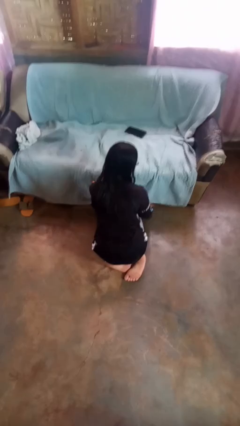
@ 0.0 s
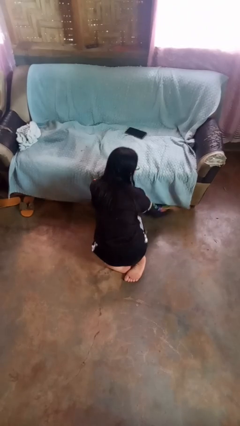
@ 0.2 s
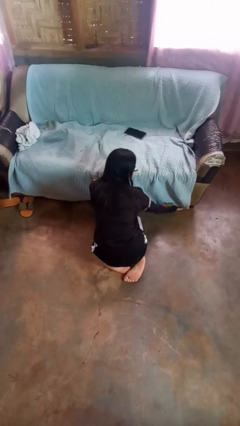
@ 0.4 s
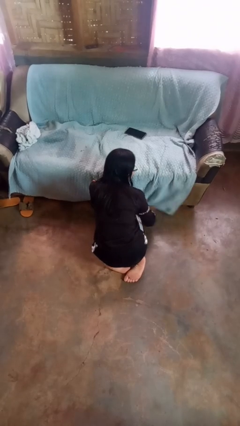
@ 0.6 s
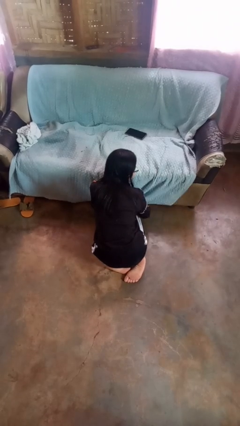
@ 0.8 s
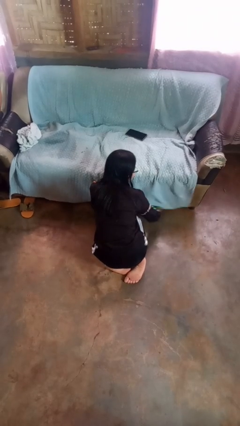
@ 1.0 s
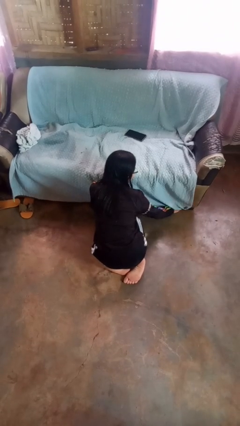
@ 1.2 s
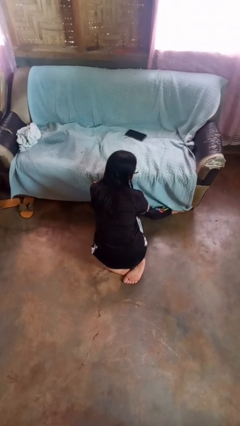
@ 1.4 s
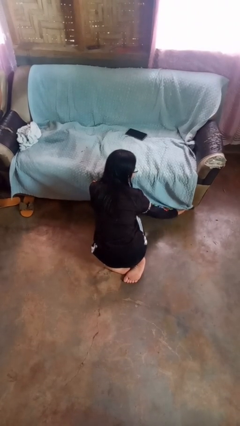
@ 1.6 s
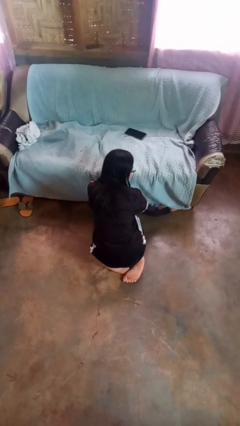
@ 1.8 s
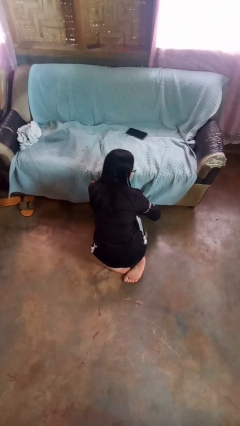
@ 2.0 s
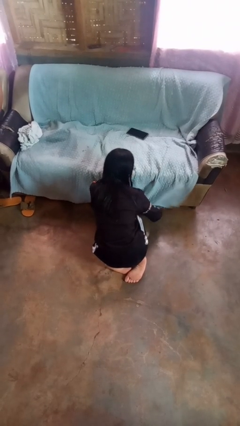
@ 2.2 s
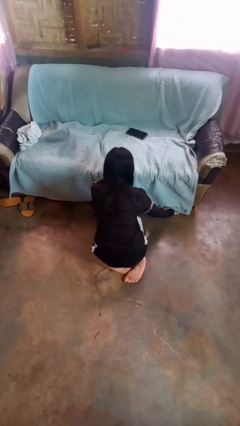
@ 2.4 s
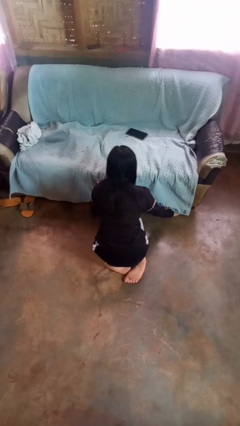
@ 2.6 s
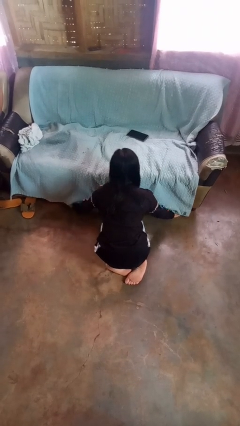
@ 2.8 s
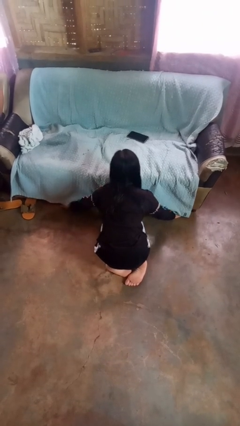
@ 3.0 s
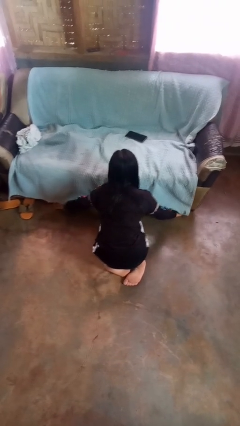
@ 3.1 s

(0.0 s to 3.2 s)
person searches under couch

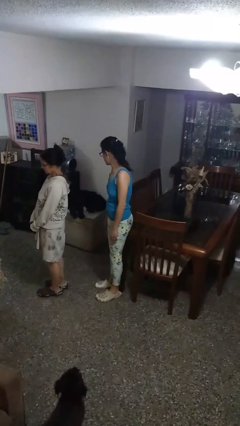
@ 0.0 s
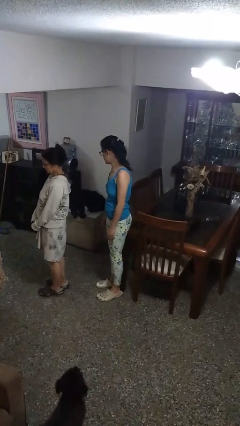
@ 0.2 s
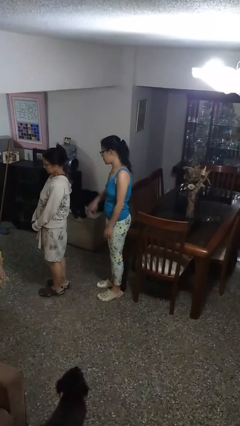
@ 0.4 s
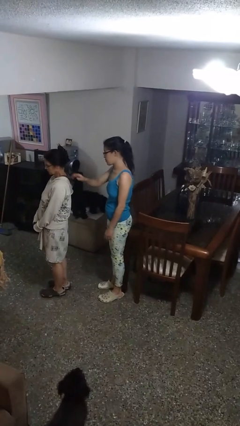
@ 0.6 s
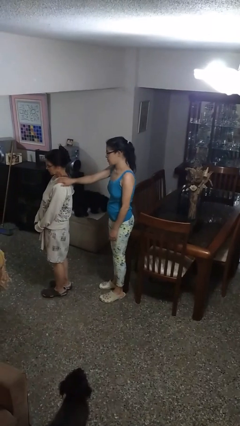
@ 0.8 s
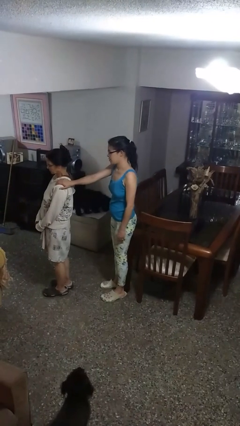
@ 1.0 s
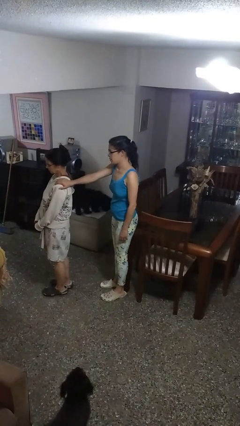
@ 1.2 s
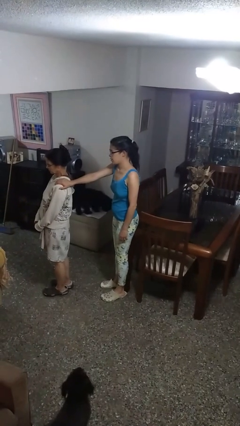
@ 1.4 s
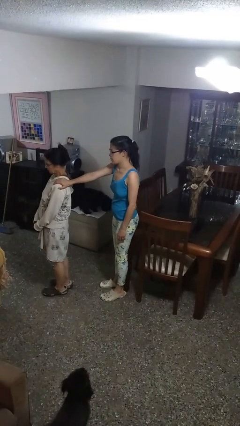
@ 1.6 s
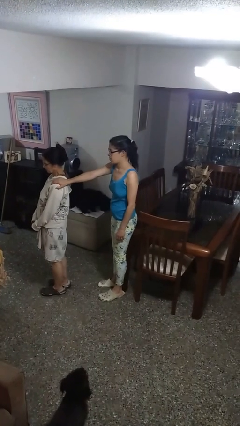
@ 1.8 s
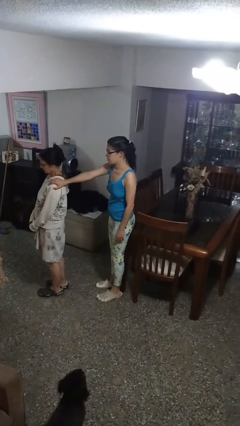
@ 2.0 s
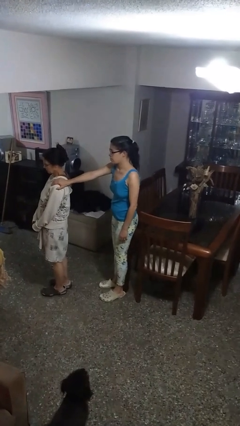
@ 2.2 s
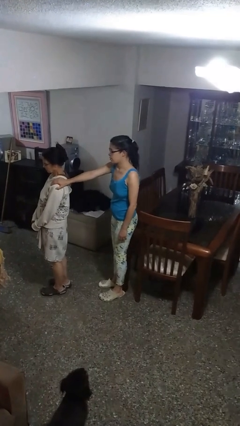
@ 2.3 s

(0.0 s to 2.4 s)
person grabs person by shoulder

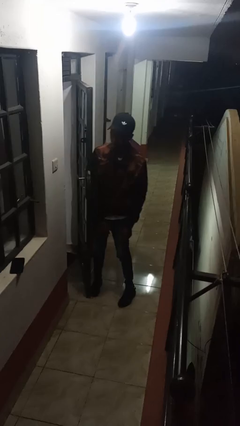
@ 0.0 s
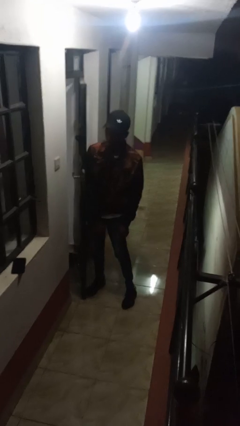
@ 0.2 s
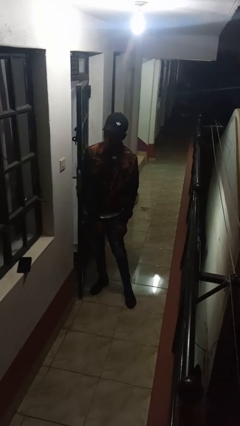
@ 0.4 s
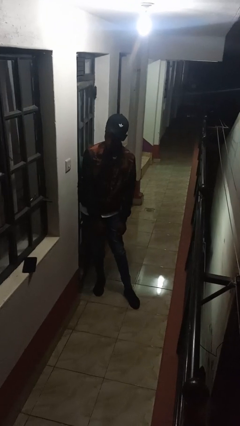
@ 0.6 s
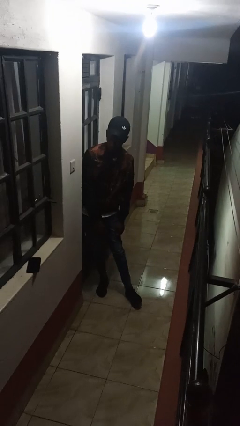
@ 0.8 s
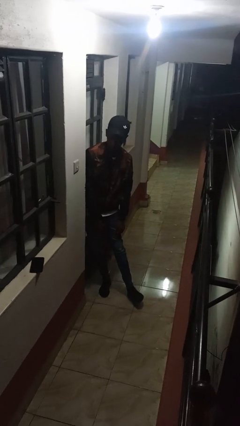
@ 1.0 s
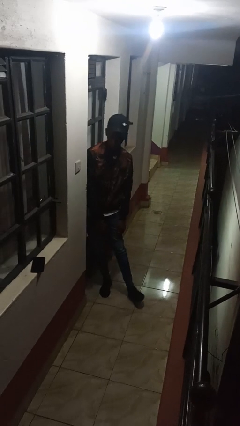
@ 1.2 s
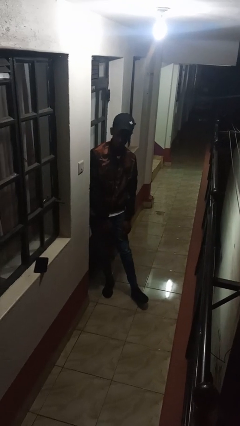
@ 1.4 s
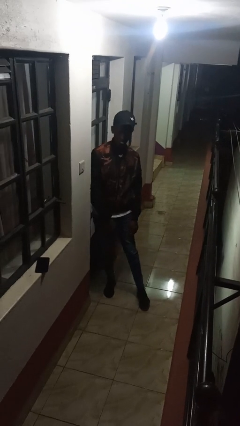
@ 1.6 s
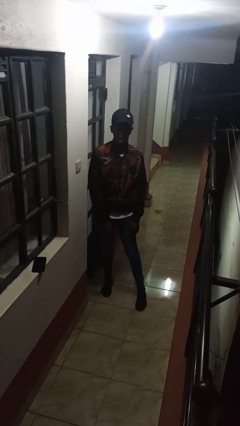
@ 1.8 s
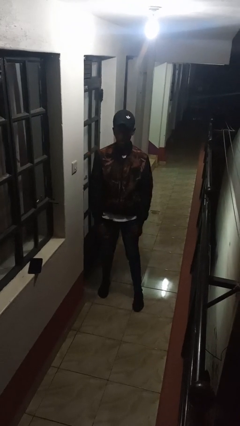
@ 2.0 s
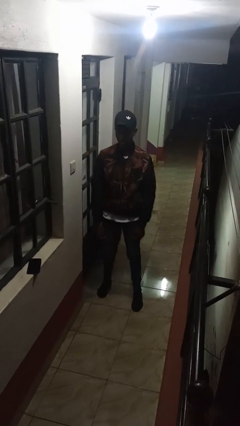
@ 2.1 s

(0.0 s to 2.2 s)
person closes door with hip

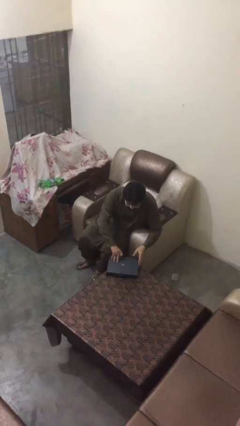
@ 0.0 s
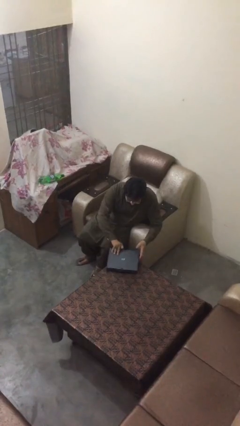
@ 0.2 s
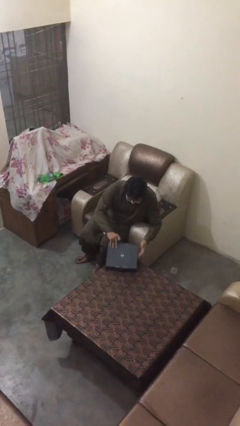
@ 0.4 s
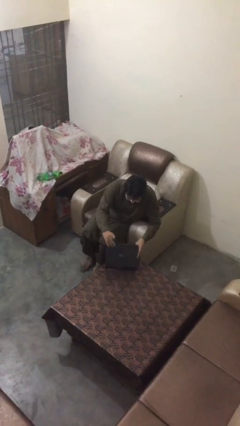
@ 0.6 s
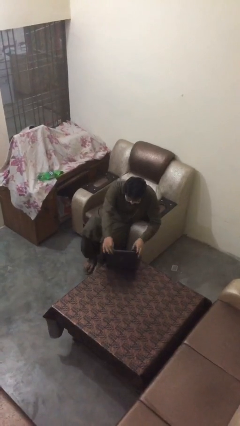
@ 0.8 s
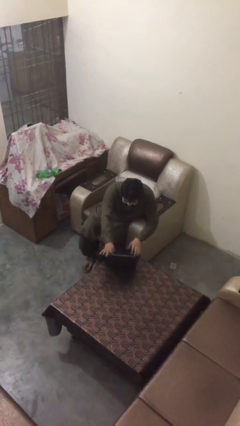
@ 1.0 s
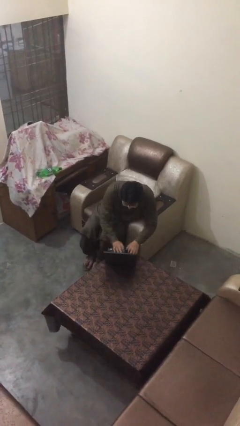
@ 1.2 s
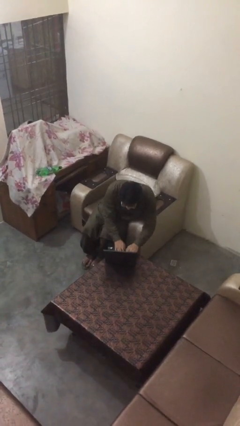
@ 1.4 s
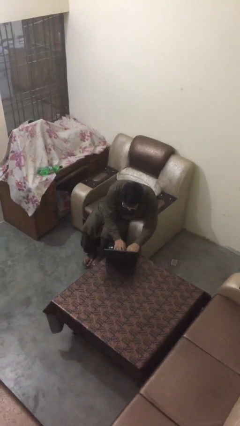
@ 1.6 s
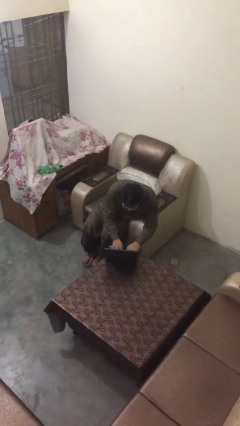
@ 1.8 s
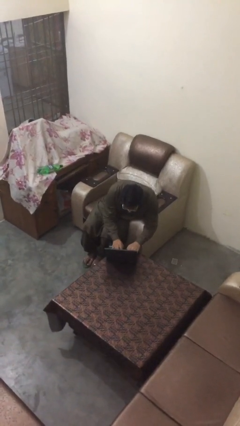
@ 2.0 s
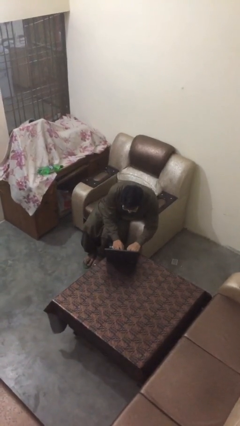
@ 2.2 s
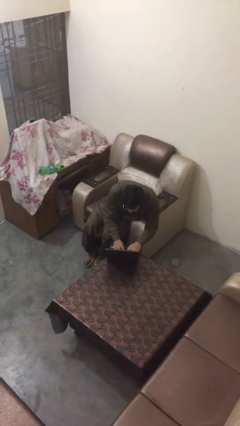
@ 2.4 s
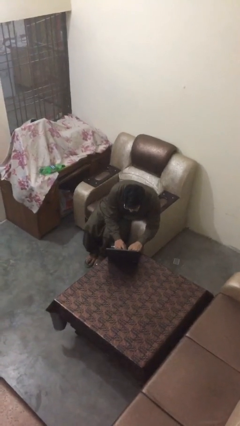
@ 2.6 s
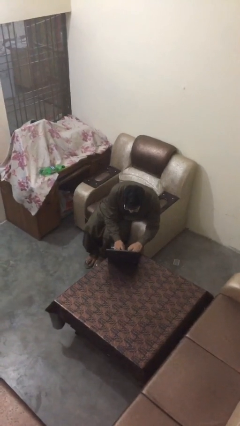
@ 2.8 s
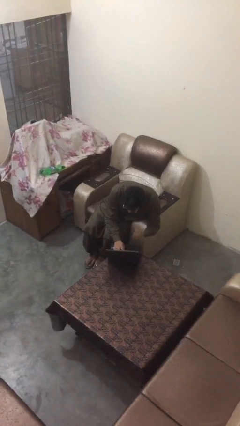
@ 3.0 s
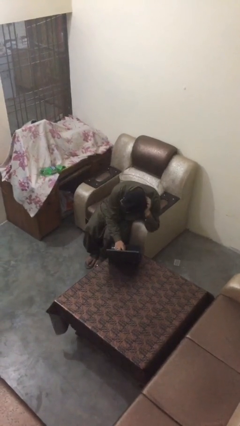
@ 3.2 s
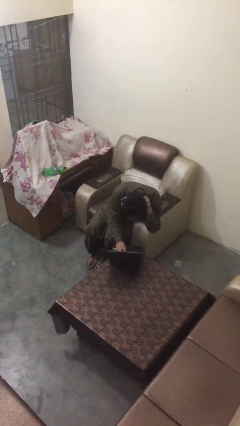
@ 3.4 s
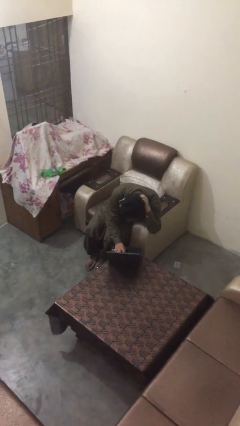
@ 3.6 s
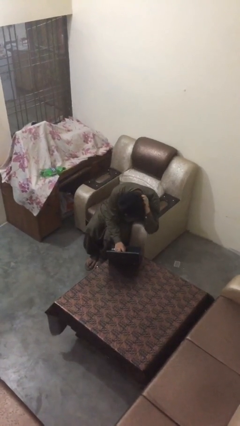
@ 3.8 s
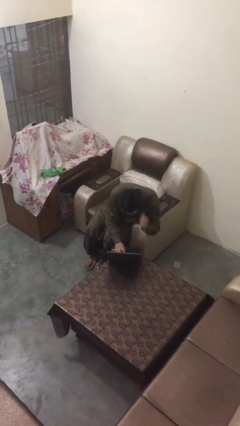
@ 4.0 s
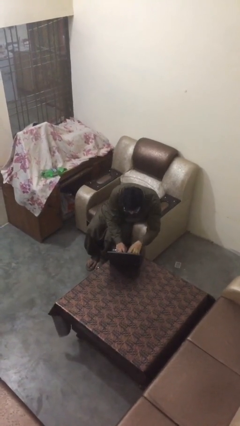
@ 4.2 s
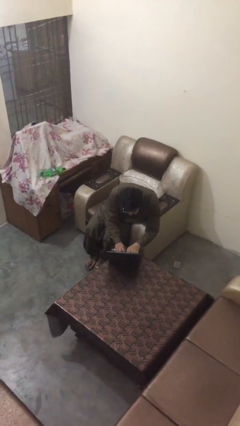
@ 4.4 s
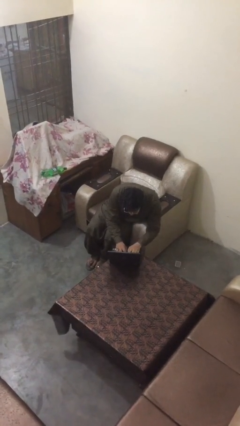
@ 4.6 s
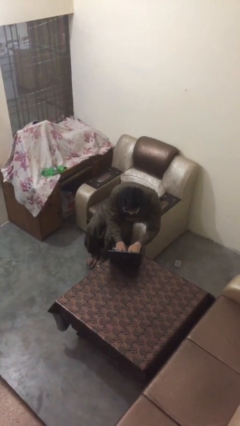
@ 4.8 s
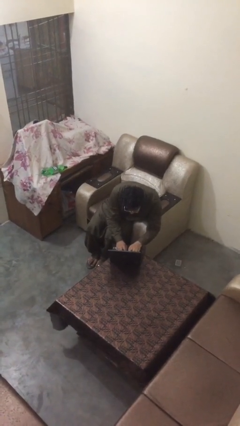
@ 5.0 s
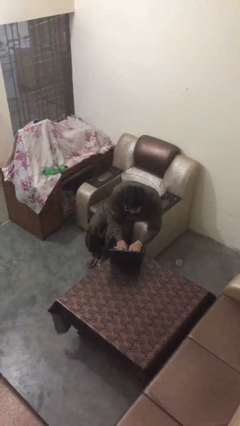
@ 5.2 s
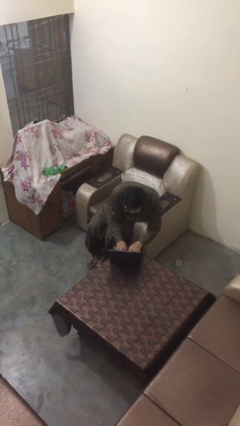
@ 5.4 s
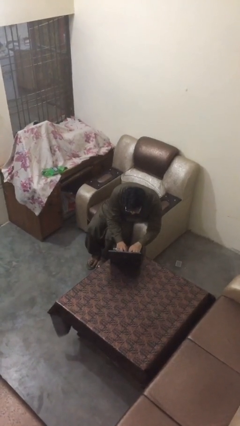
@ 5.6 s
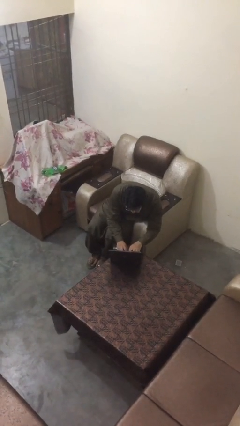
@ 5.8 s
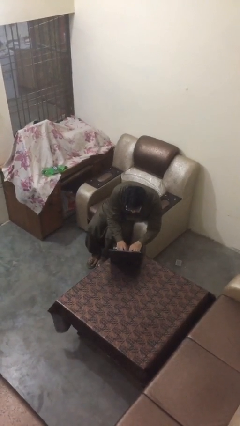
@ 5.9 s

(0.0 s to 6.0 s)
person interacts with laptop

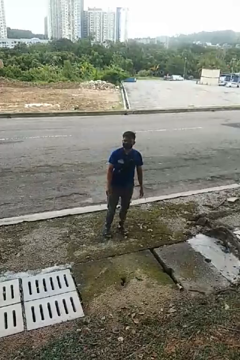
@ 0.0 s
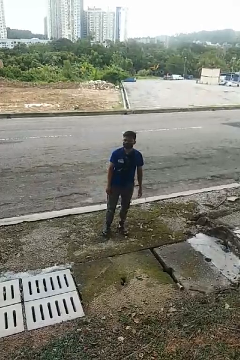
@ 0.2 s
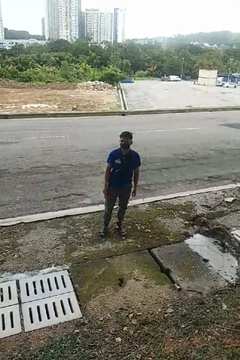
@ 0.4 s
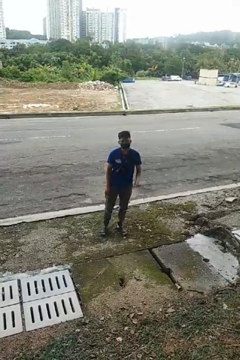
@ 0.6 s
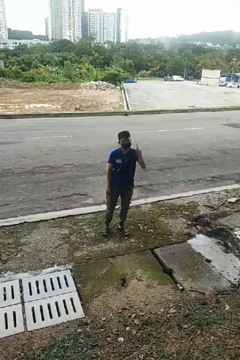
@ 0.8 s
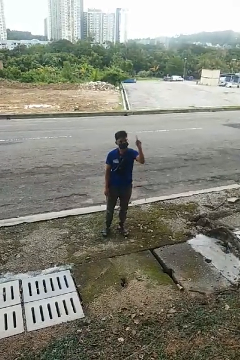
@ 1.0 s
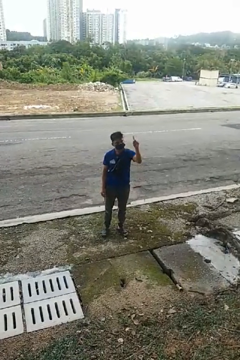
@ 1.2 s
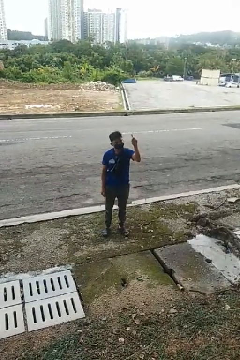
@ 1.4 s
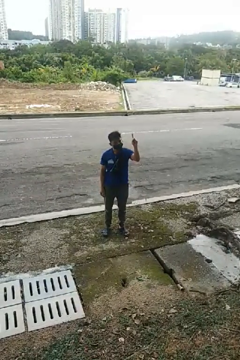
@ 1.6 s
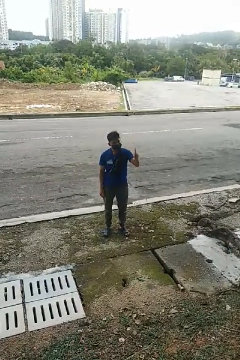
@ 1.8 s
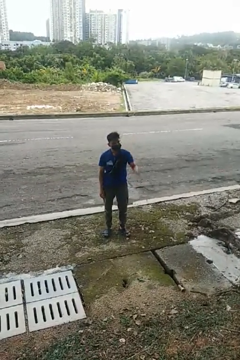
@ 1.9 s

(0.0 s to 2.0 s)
person gestures number one

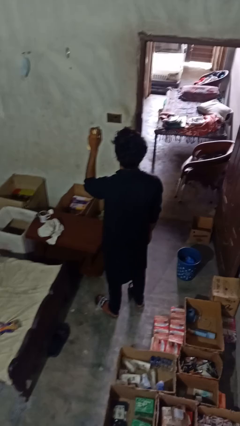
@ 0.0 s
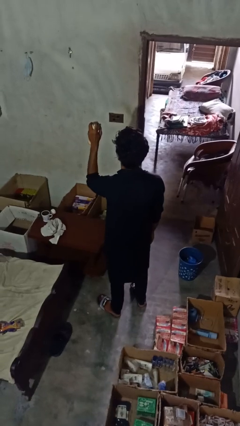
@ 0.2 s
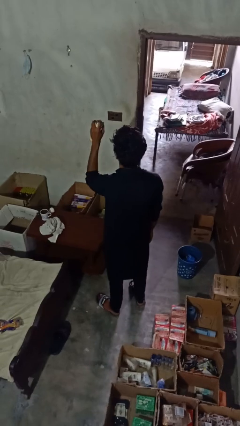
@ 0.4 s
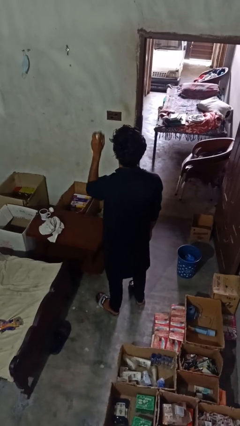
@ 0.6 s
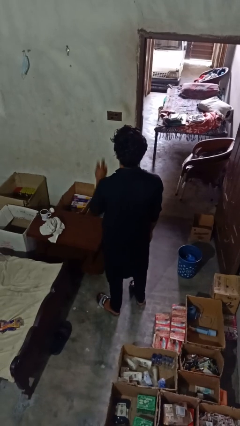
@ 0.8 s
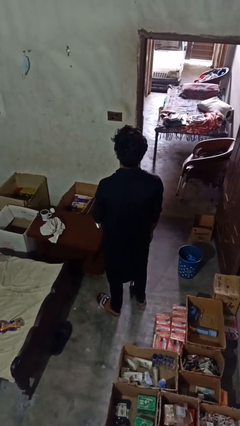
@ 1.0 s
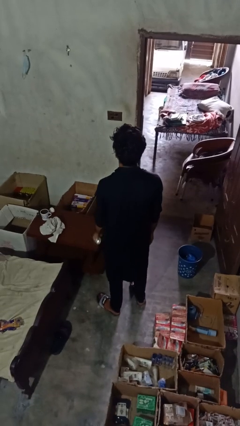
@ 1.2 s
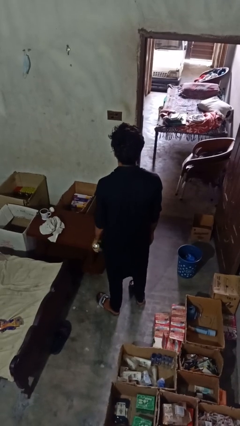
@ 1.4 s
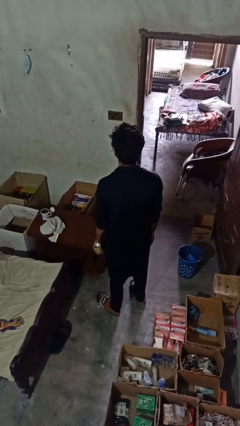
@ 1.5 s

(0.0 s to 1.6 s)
person sprays from bottle

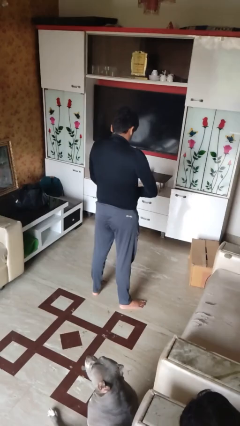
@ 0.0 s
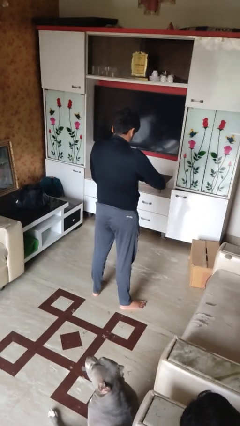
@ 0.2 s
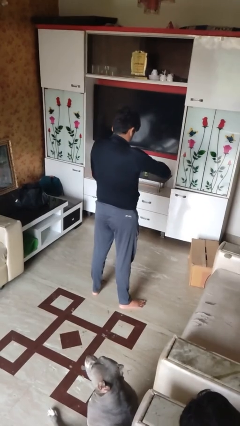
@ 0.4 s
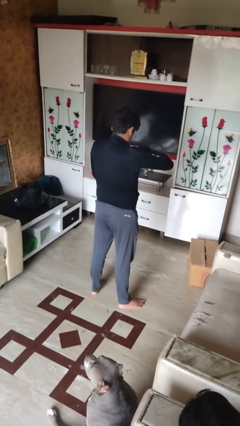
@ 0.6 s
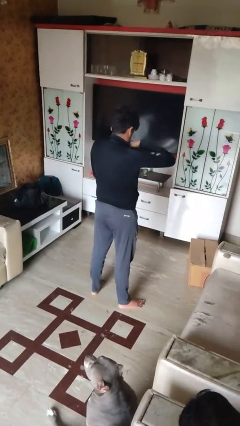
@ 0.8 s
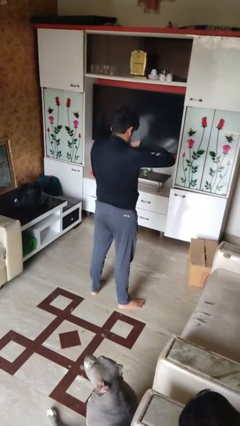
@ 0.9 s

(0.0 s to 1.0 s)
person zips up jacket
